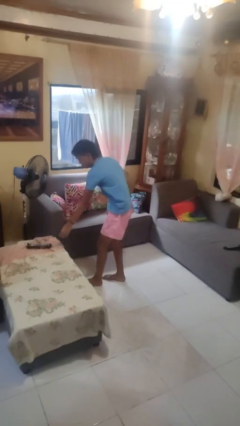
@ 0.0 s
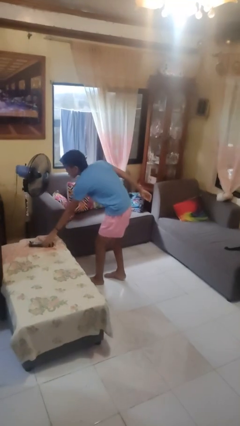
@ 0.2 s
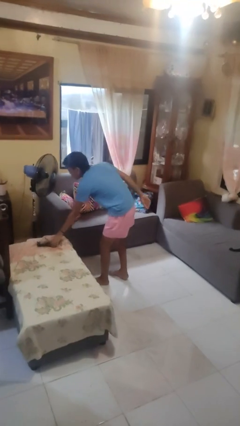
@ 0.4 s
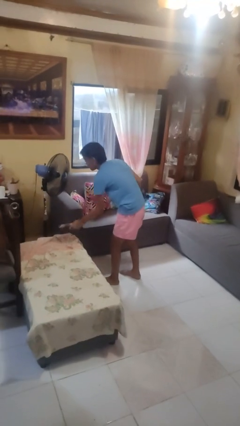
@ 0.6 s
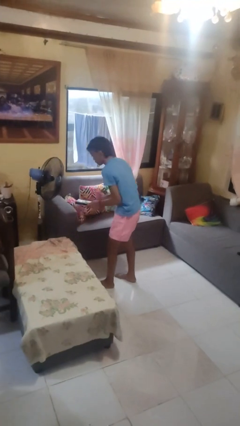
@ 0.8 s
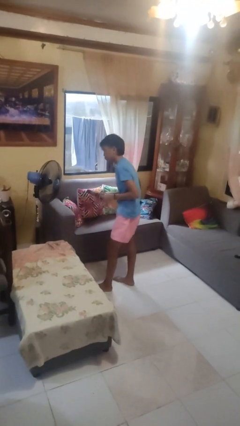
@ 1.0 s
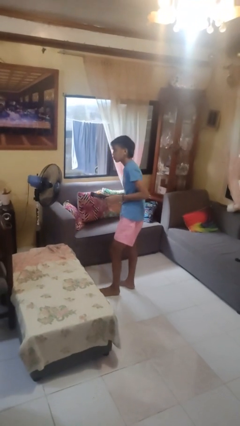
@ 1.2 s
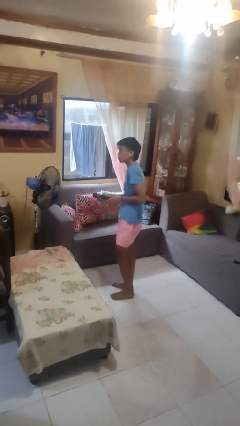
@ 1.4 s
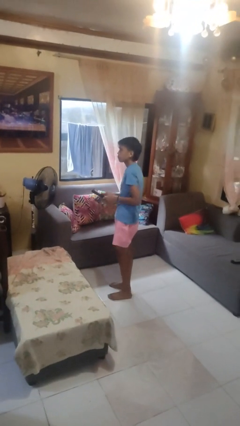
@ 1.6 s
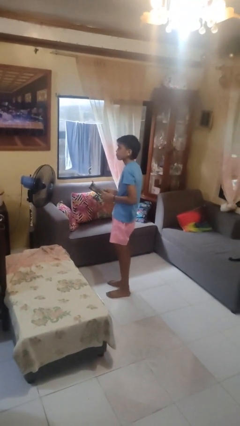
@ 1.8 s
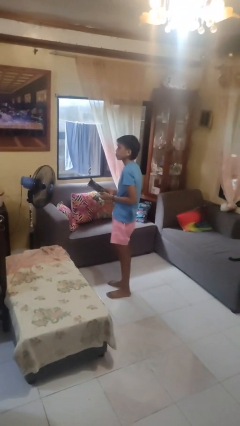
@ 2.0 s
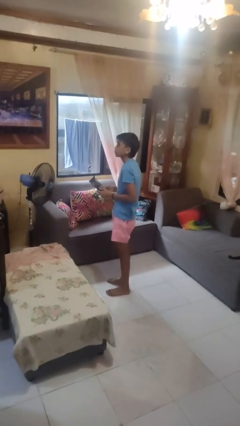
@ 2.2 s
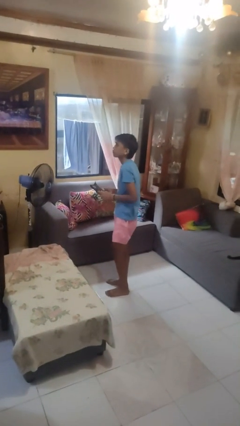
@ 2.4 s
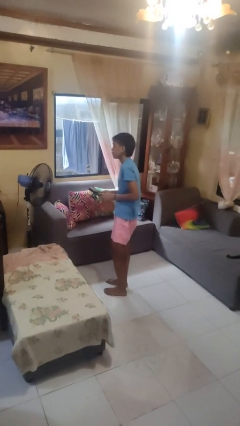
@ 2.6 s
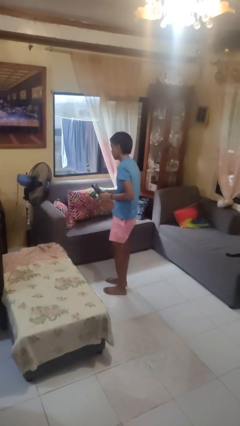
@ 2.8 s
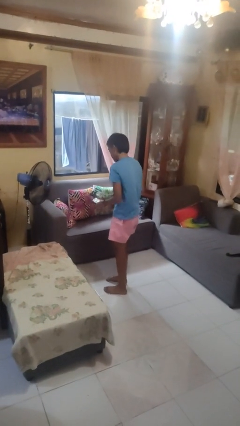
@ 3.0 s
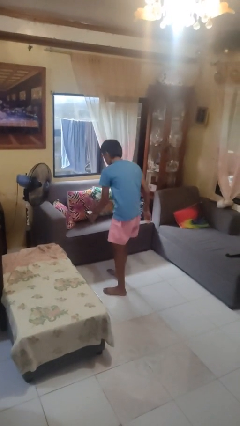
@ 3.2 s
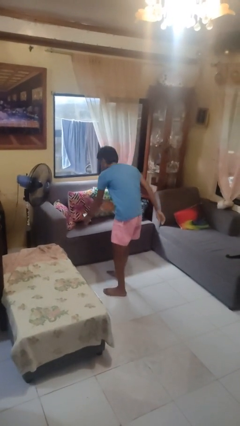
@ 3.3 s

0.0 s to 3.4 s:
person picks up object from couch

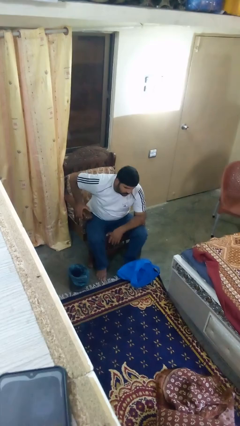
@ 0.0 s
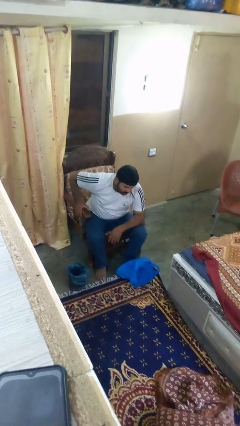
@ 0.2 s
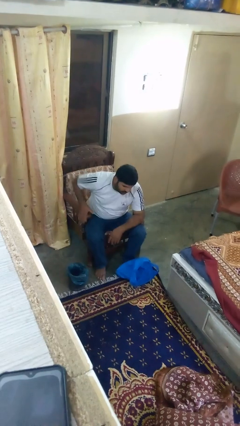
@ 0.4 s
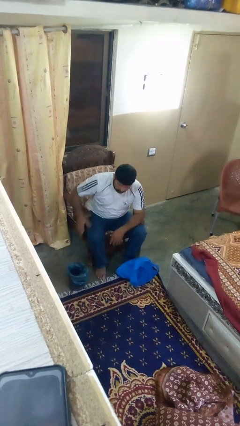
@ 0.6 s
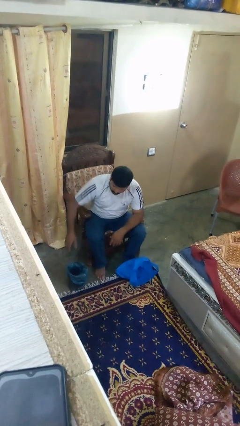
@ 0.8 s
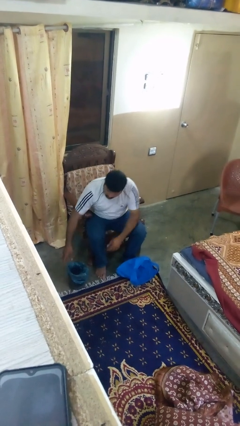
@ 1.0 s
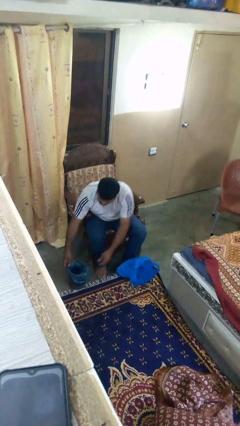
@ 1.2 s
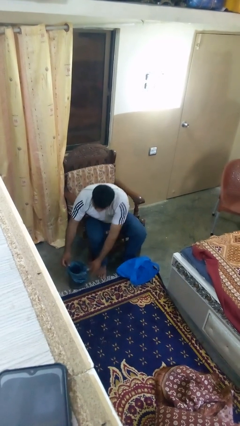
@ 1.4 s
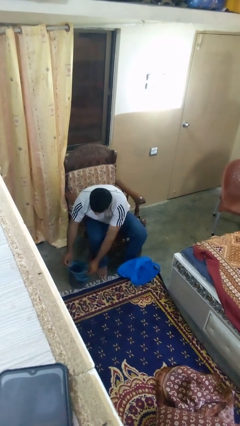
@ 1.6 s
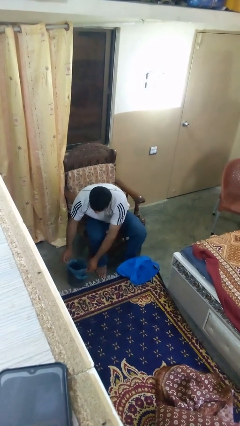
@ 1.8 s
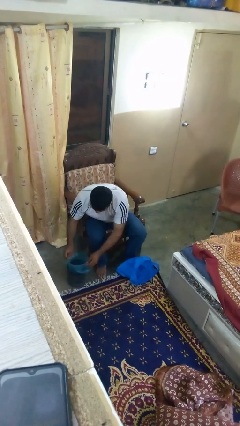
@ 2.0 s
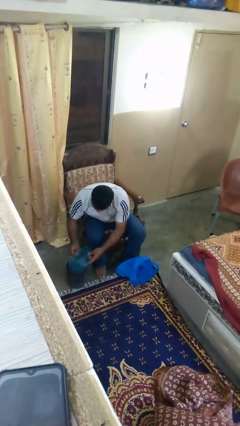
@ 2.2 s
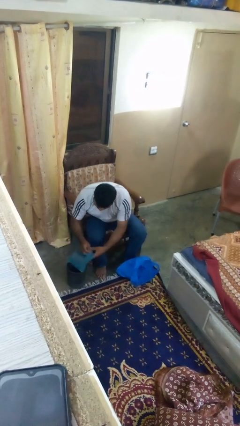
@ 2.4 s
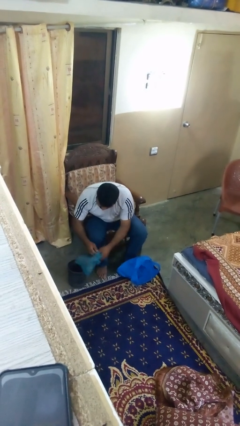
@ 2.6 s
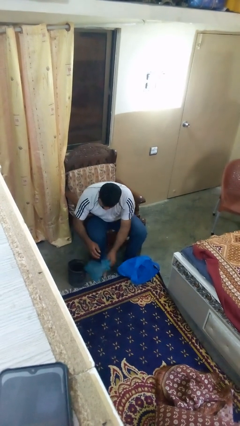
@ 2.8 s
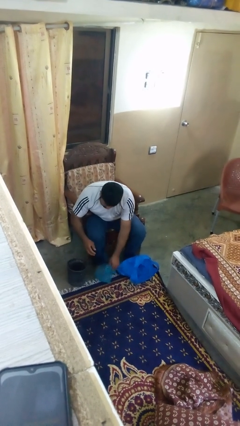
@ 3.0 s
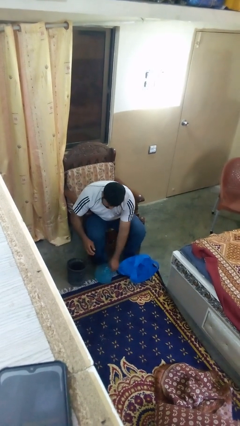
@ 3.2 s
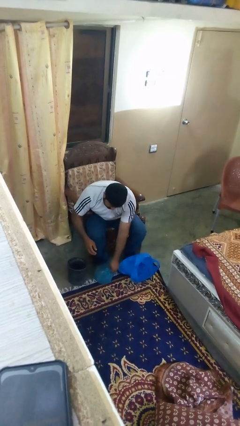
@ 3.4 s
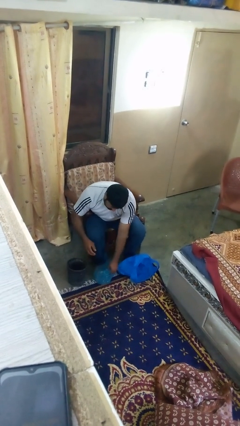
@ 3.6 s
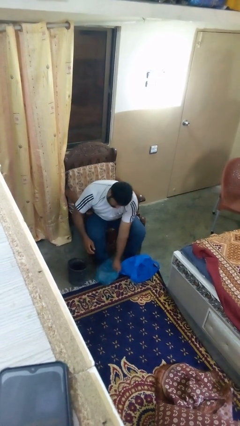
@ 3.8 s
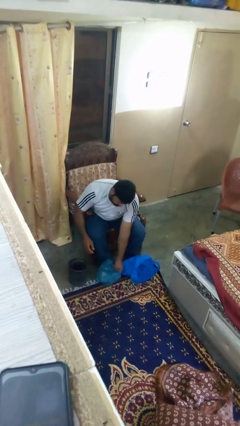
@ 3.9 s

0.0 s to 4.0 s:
person removes trashbag from trashcan

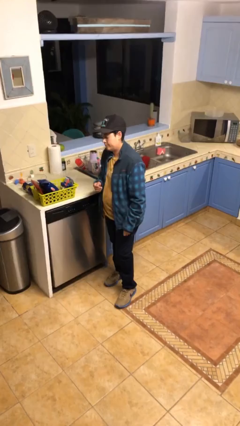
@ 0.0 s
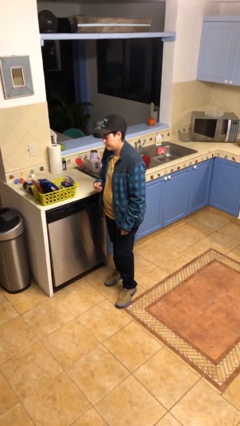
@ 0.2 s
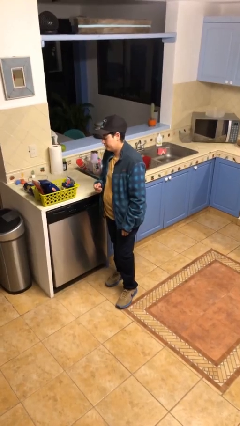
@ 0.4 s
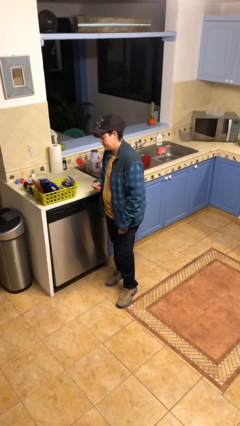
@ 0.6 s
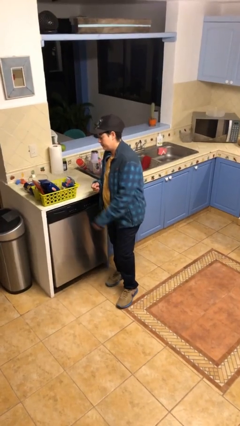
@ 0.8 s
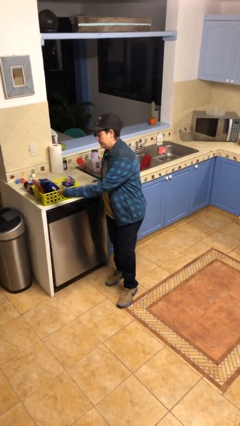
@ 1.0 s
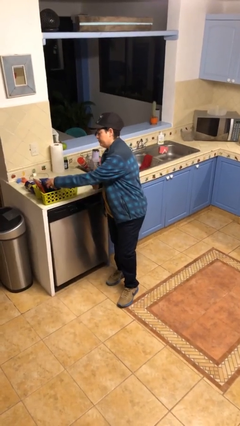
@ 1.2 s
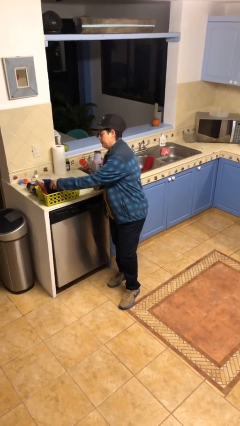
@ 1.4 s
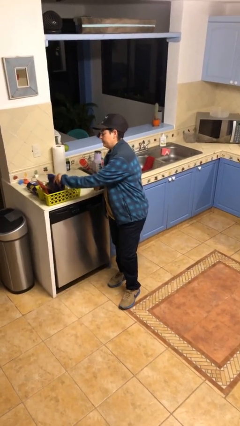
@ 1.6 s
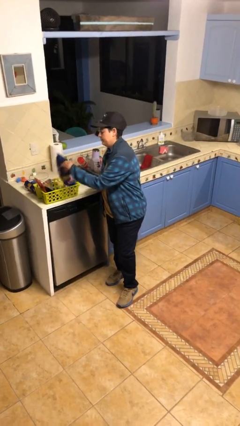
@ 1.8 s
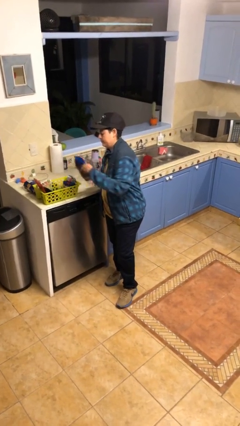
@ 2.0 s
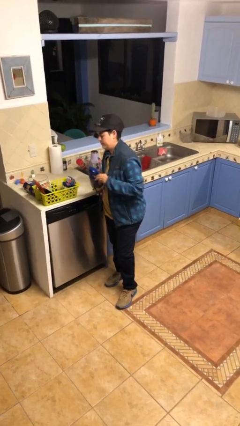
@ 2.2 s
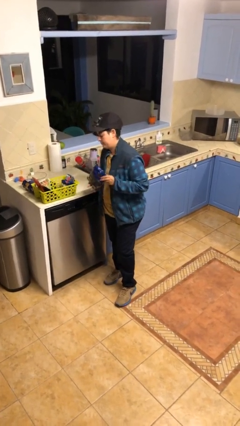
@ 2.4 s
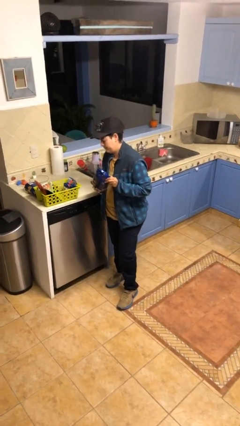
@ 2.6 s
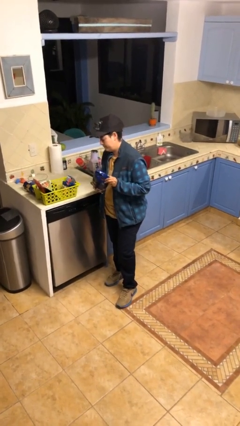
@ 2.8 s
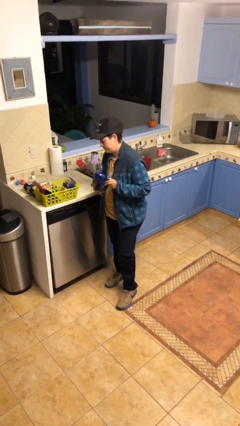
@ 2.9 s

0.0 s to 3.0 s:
person takes object from basket

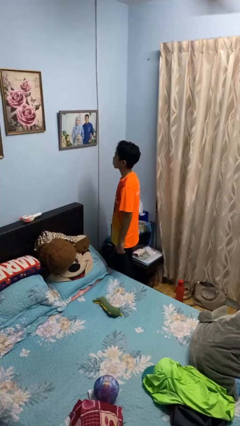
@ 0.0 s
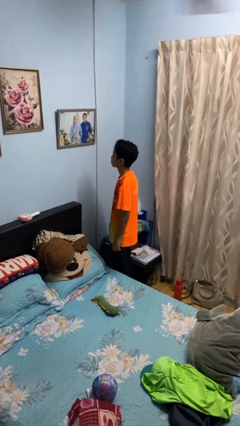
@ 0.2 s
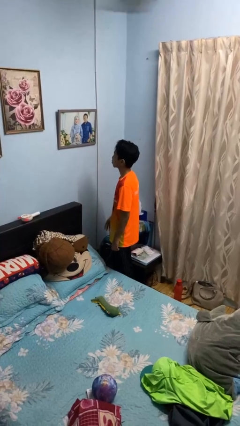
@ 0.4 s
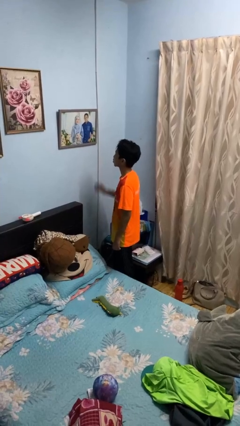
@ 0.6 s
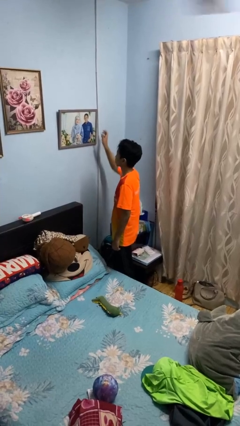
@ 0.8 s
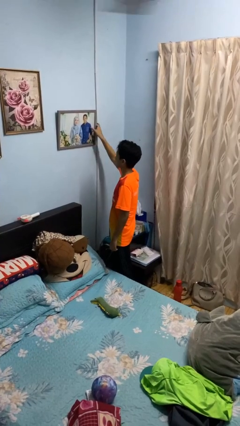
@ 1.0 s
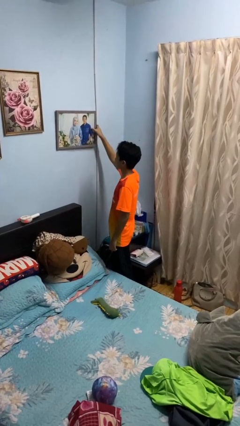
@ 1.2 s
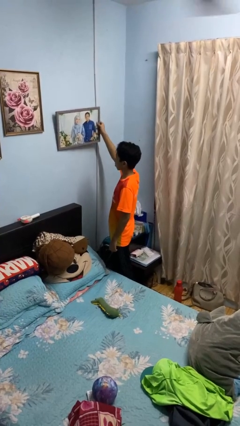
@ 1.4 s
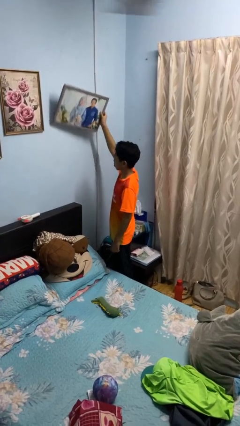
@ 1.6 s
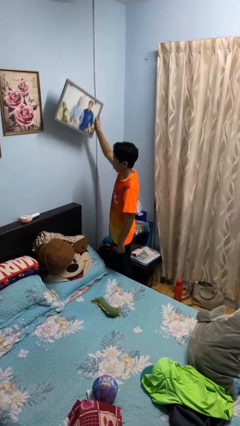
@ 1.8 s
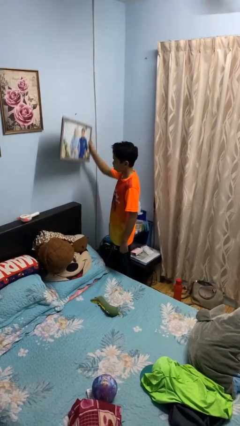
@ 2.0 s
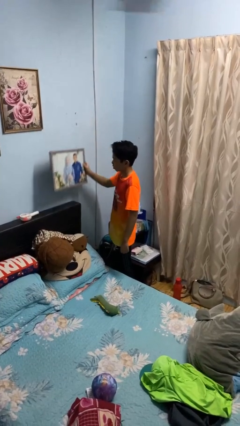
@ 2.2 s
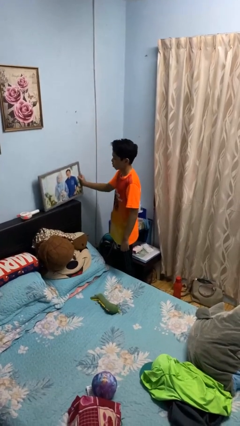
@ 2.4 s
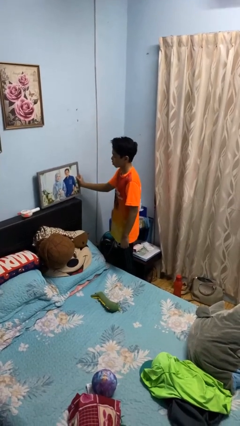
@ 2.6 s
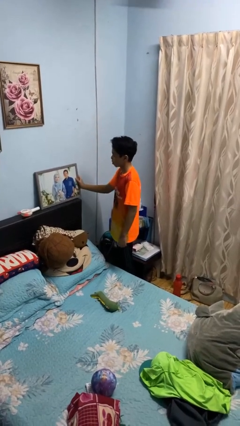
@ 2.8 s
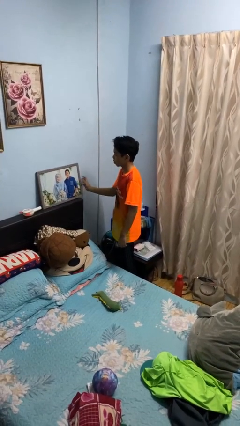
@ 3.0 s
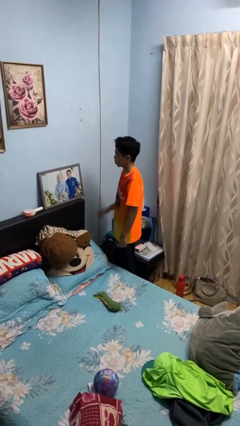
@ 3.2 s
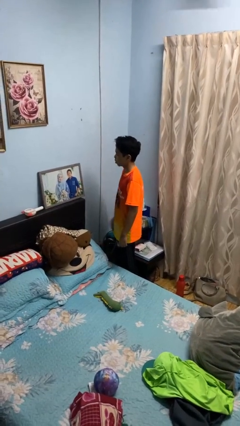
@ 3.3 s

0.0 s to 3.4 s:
person takes down picture frame

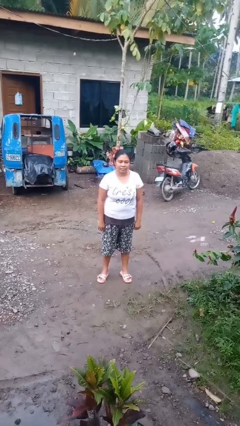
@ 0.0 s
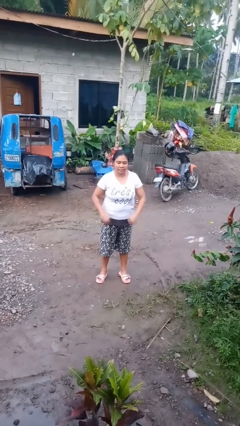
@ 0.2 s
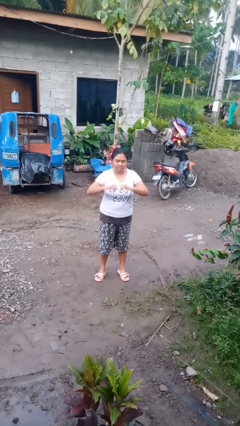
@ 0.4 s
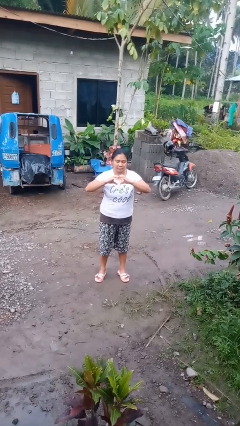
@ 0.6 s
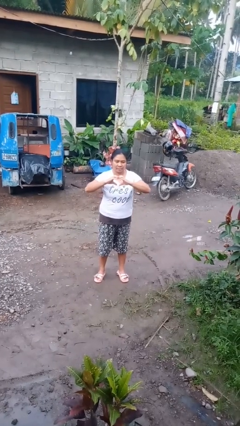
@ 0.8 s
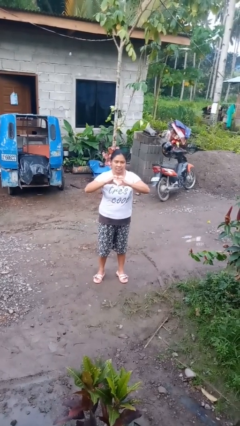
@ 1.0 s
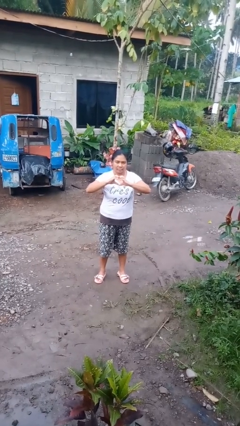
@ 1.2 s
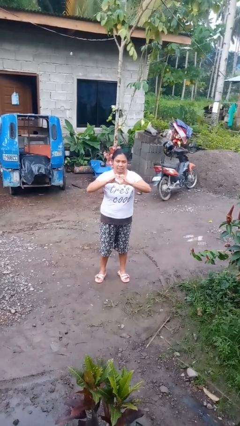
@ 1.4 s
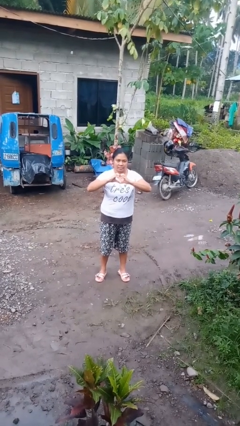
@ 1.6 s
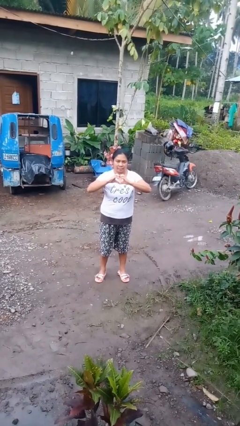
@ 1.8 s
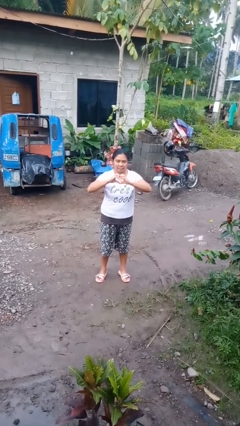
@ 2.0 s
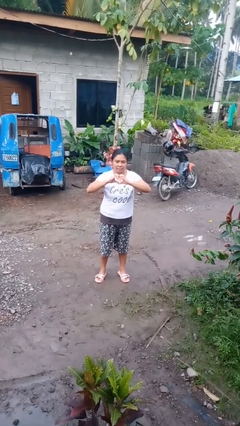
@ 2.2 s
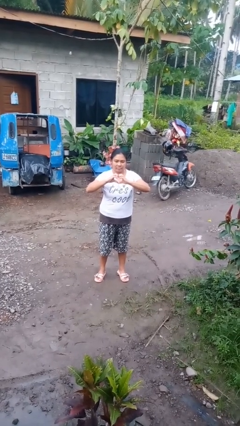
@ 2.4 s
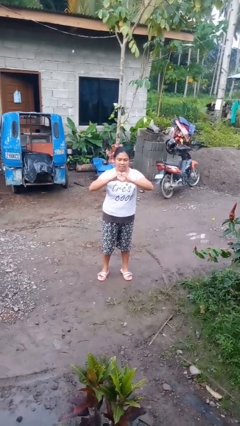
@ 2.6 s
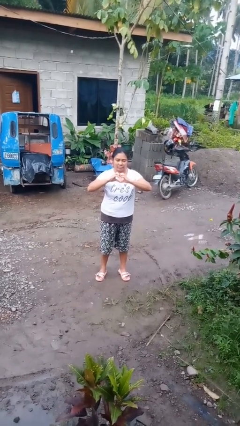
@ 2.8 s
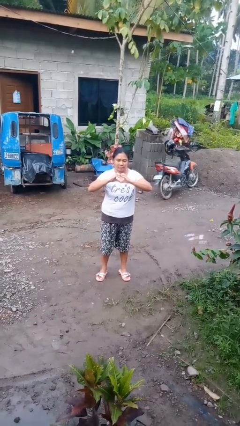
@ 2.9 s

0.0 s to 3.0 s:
person gestures heart

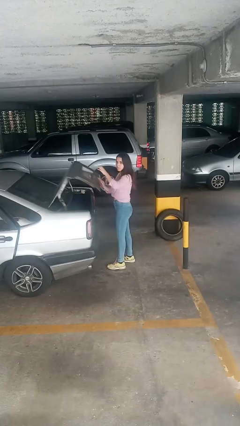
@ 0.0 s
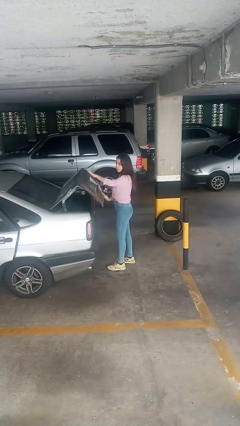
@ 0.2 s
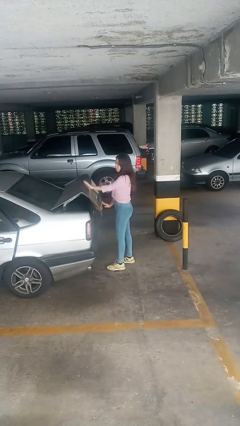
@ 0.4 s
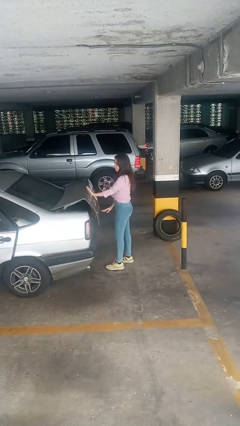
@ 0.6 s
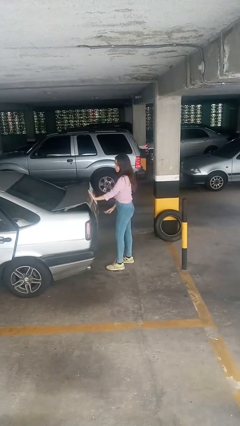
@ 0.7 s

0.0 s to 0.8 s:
person closes car trunk
